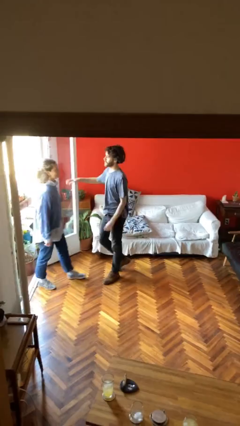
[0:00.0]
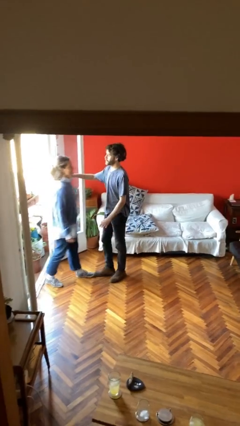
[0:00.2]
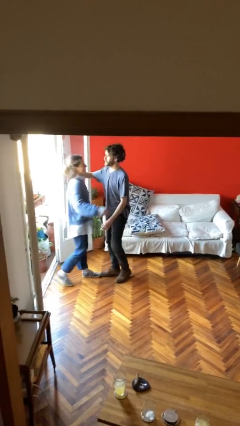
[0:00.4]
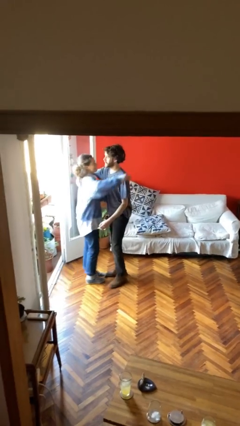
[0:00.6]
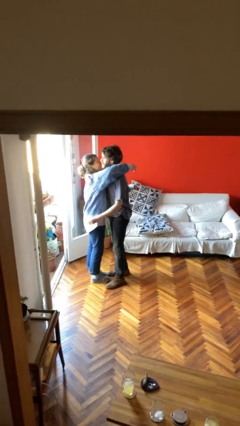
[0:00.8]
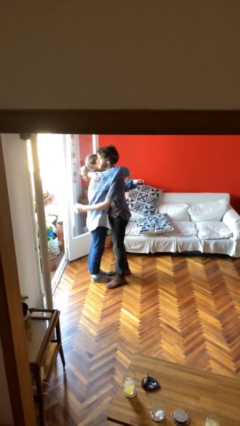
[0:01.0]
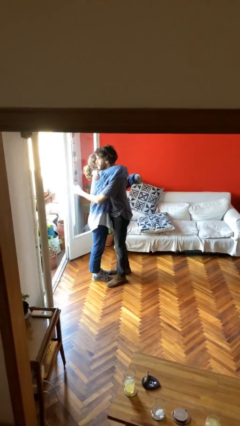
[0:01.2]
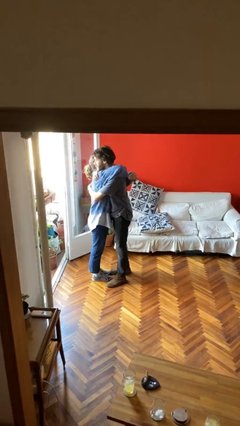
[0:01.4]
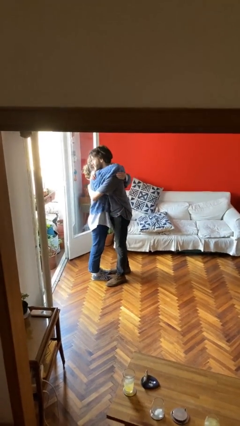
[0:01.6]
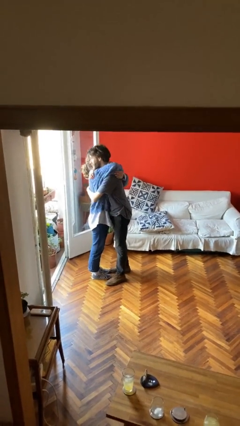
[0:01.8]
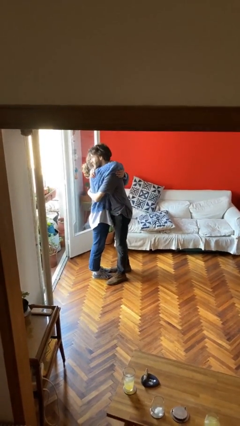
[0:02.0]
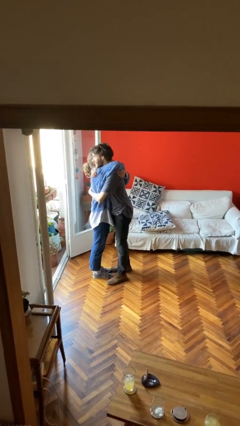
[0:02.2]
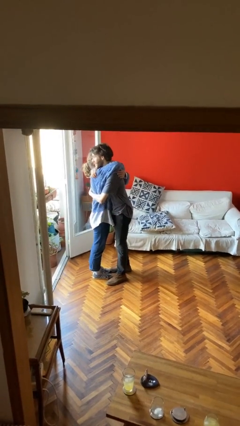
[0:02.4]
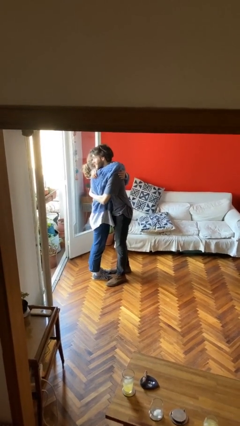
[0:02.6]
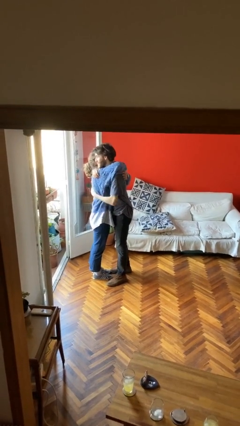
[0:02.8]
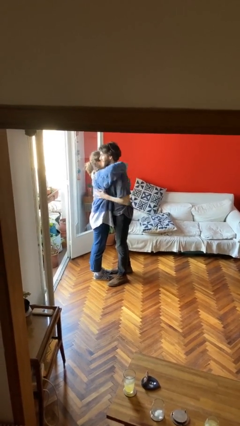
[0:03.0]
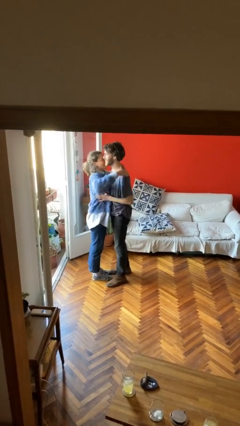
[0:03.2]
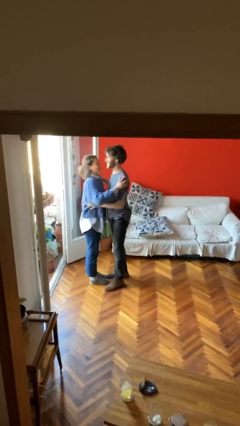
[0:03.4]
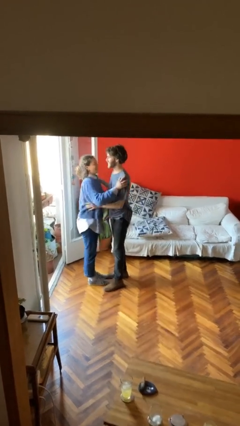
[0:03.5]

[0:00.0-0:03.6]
person embraces person

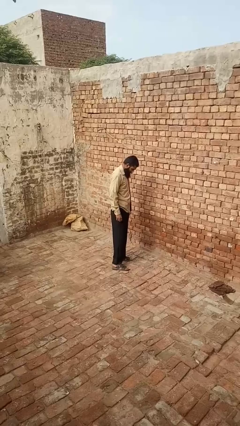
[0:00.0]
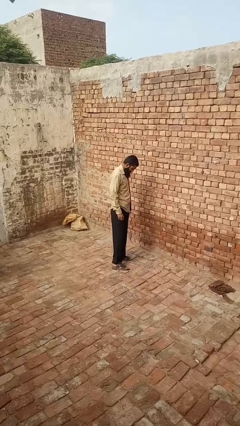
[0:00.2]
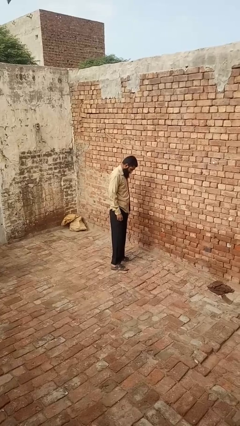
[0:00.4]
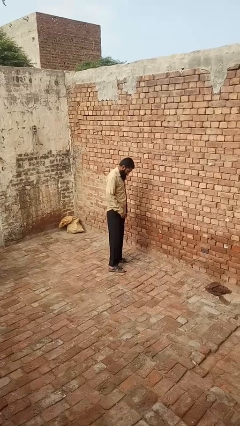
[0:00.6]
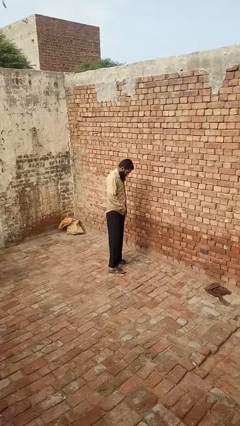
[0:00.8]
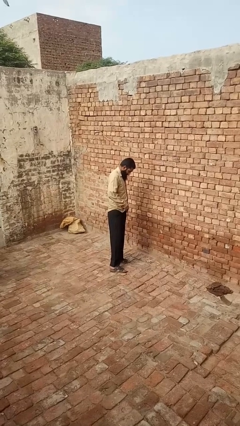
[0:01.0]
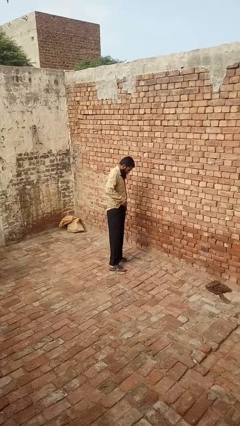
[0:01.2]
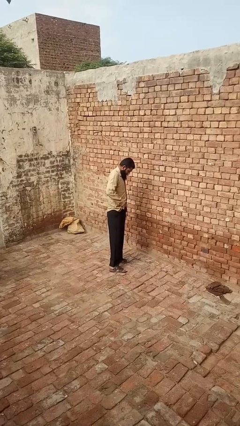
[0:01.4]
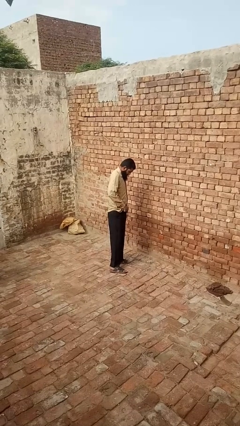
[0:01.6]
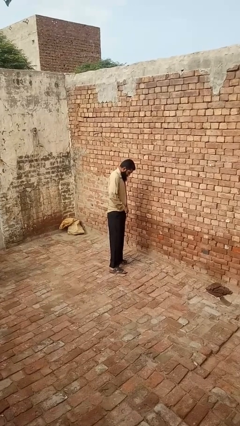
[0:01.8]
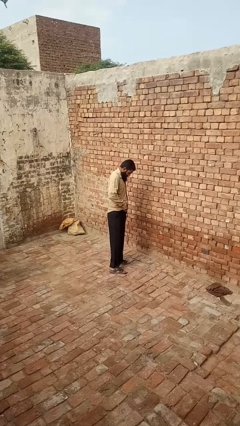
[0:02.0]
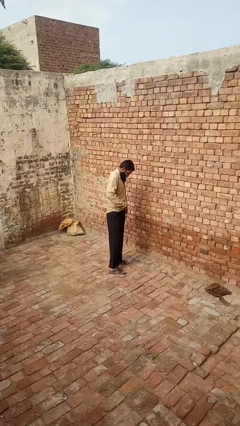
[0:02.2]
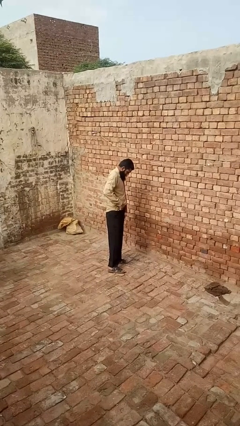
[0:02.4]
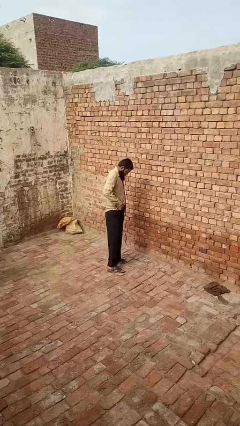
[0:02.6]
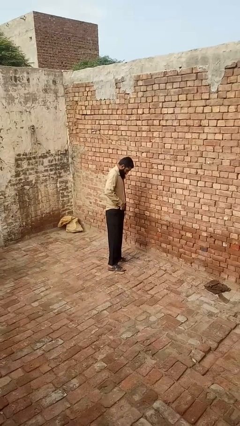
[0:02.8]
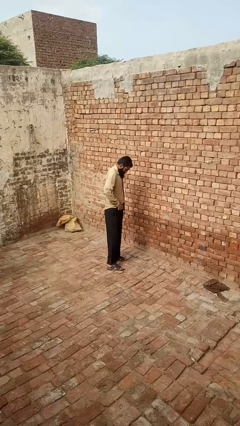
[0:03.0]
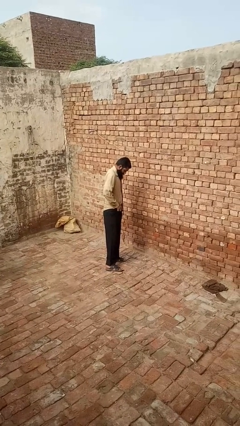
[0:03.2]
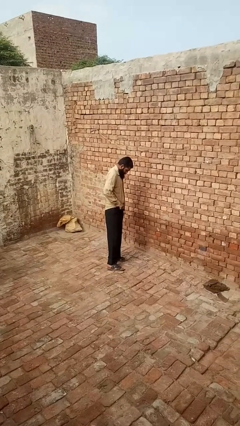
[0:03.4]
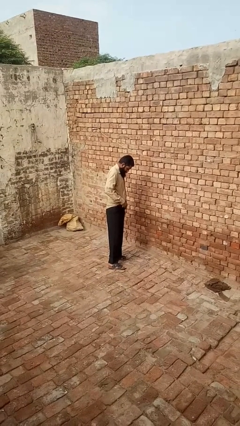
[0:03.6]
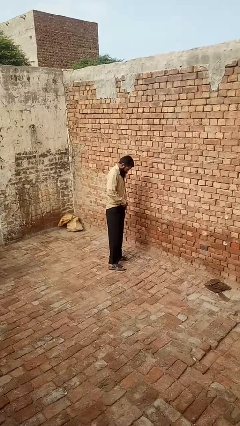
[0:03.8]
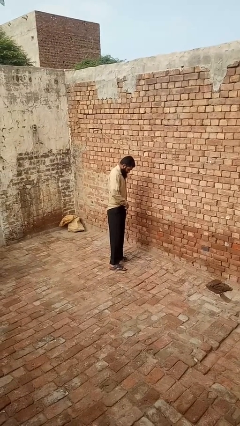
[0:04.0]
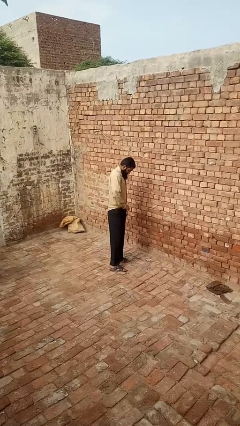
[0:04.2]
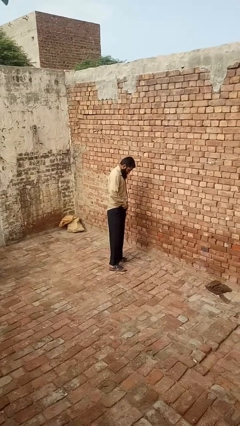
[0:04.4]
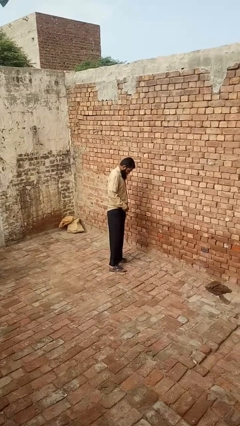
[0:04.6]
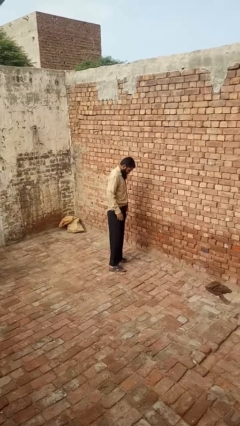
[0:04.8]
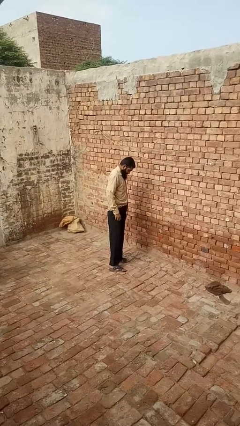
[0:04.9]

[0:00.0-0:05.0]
person tucks in shirt

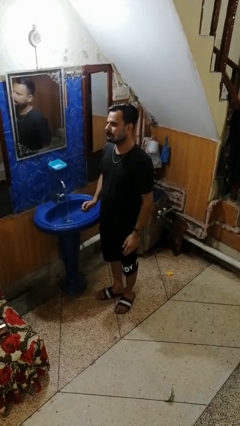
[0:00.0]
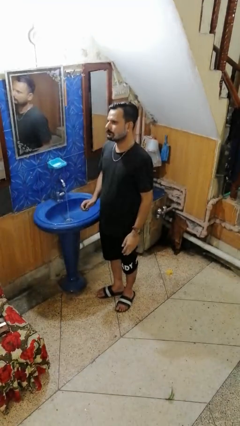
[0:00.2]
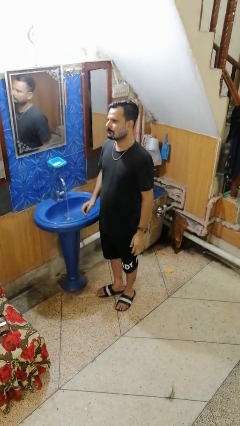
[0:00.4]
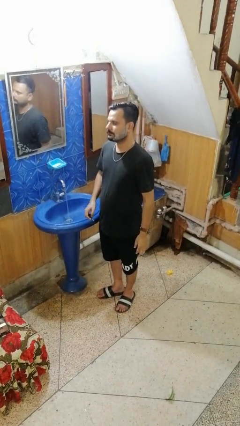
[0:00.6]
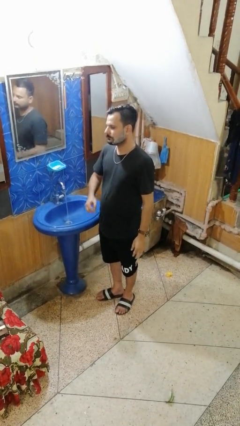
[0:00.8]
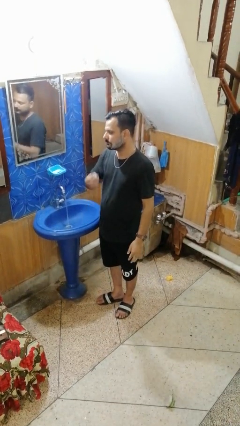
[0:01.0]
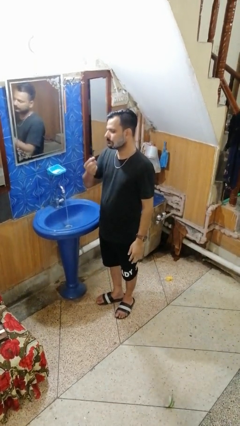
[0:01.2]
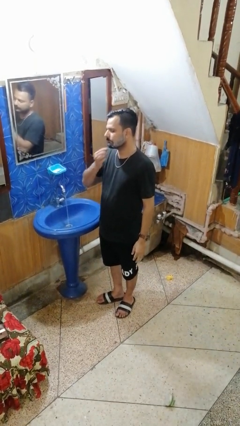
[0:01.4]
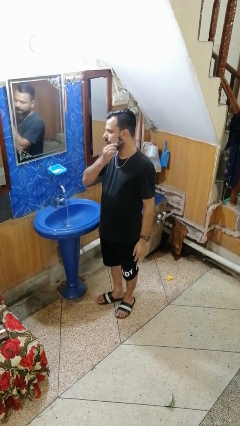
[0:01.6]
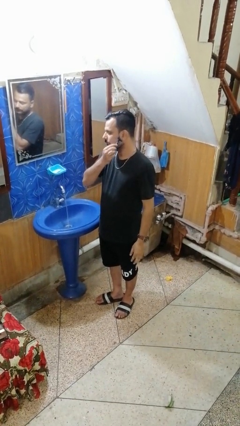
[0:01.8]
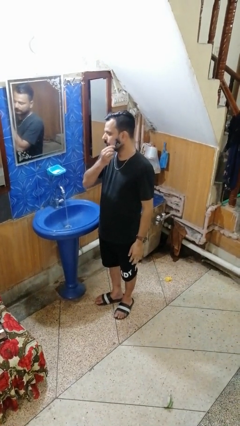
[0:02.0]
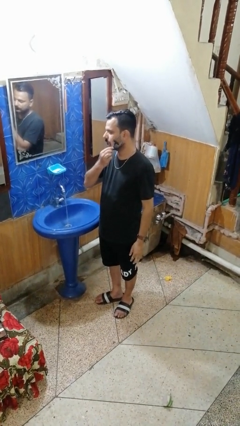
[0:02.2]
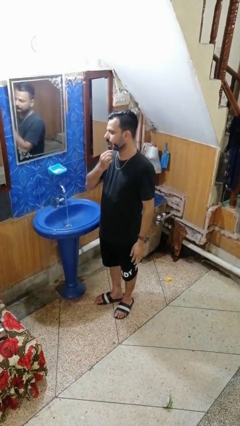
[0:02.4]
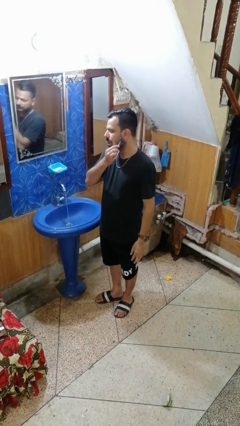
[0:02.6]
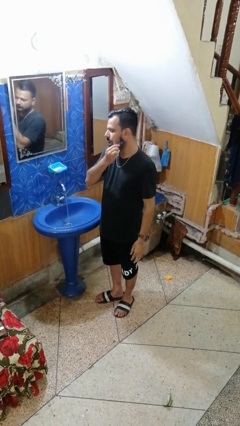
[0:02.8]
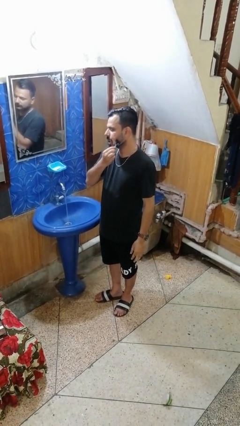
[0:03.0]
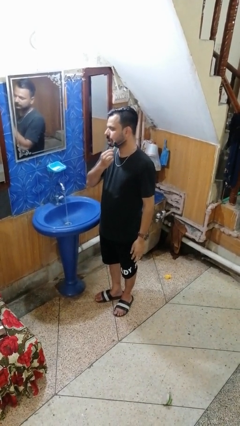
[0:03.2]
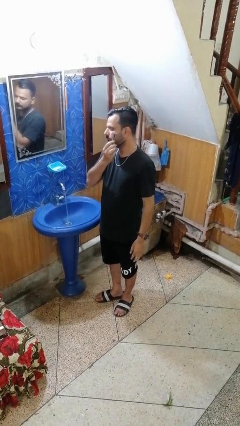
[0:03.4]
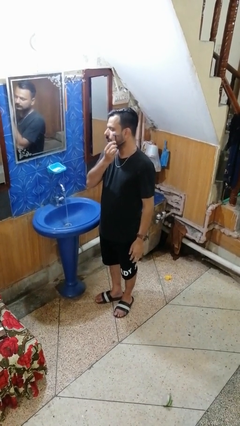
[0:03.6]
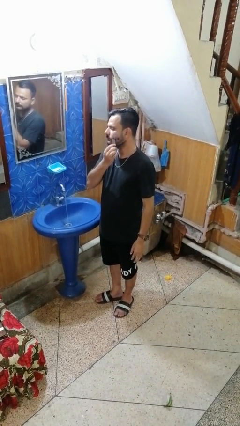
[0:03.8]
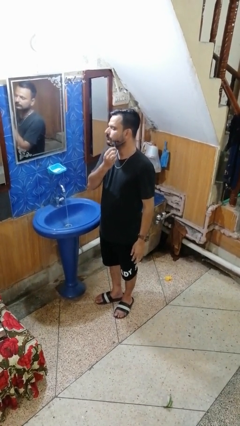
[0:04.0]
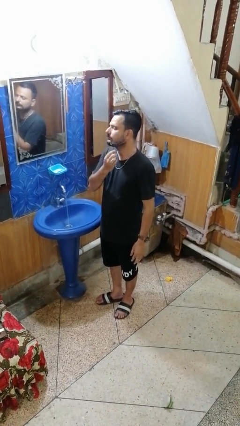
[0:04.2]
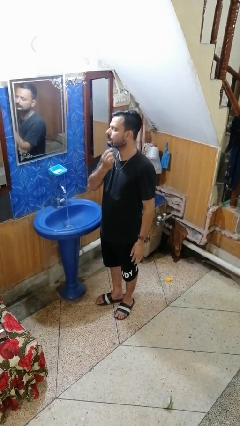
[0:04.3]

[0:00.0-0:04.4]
person shaves face

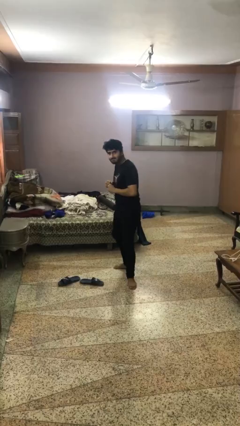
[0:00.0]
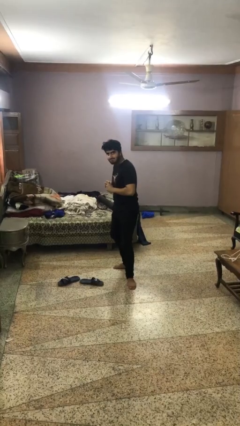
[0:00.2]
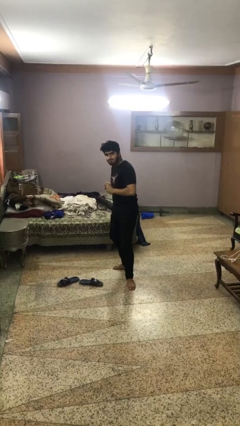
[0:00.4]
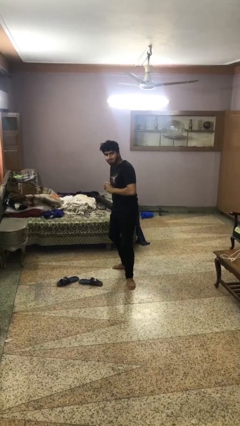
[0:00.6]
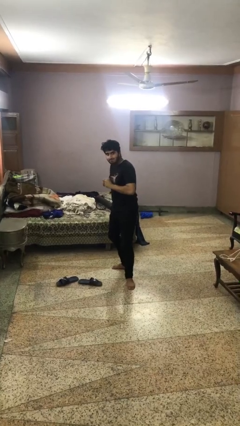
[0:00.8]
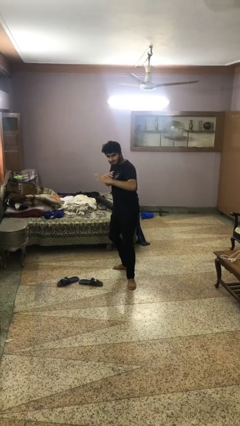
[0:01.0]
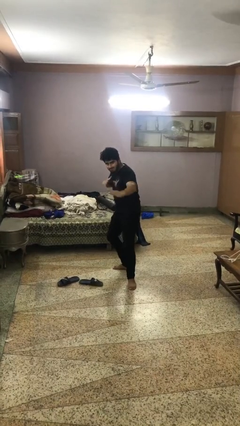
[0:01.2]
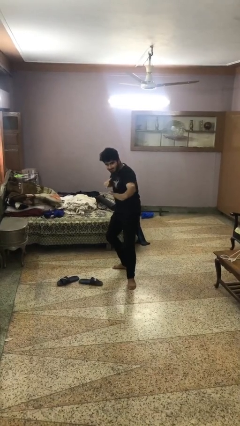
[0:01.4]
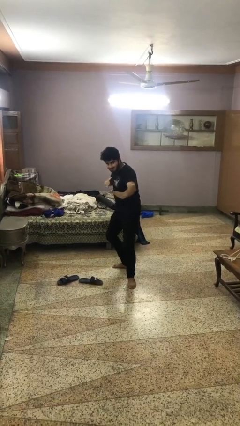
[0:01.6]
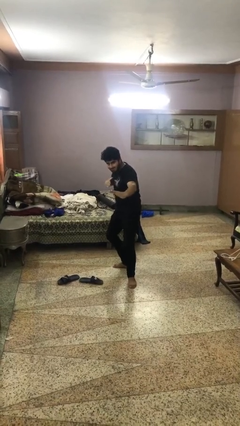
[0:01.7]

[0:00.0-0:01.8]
person karate chop

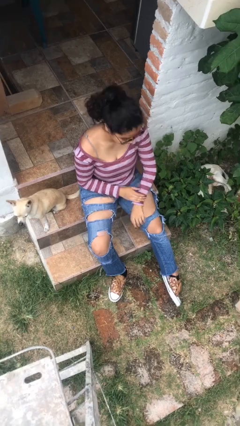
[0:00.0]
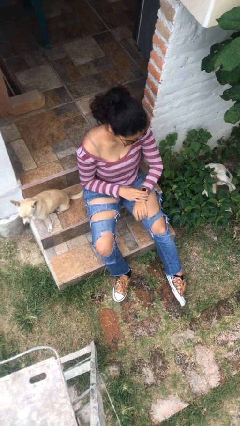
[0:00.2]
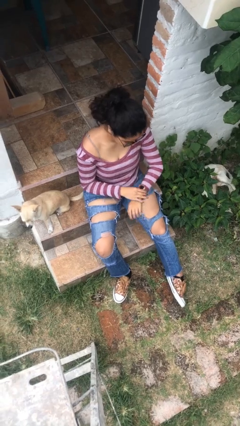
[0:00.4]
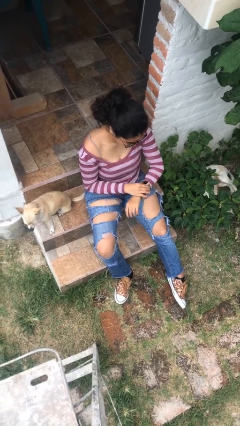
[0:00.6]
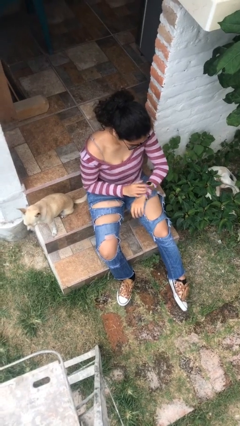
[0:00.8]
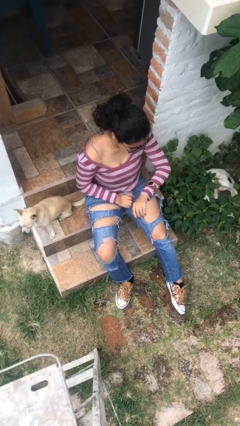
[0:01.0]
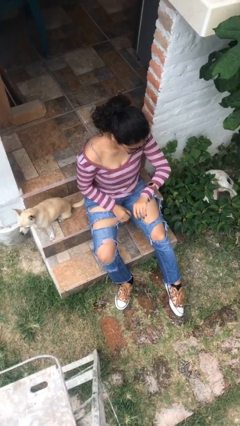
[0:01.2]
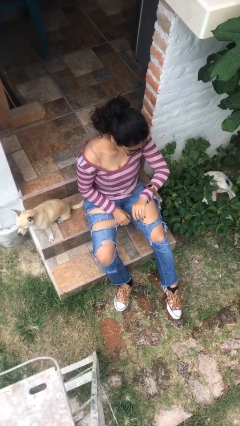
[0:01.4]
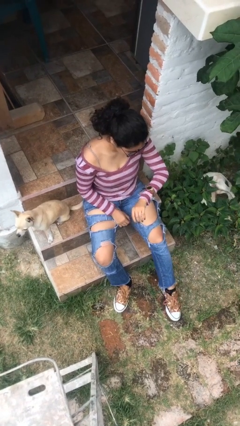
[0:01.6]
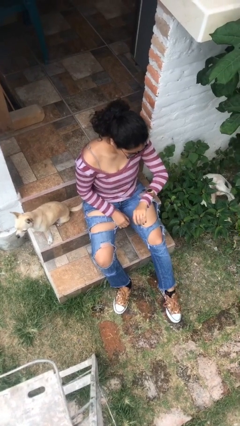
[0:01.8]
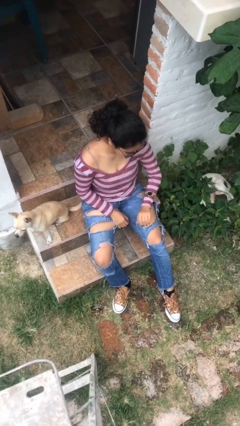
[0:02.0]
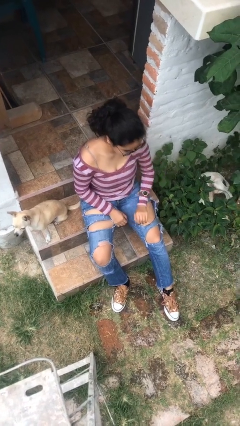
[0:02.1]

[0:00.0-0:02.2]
person looks at wristwatch

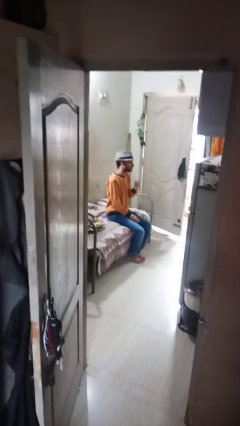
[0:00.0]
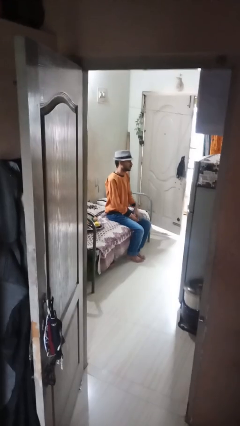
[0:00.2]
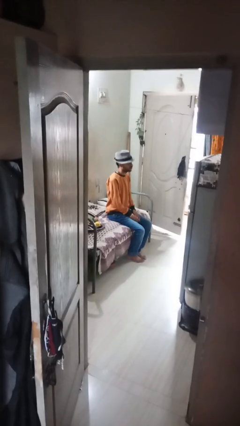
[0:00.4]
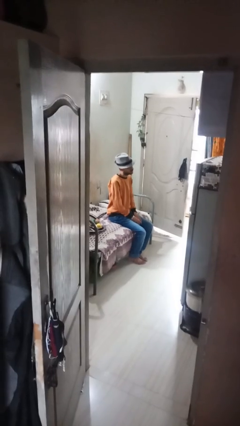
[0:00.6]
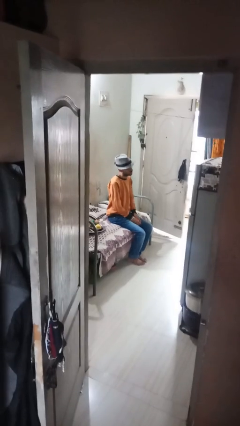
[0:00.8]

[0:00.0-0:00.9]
person strokes chin
